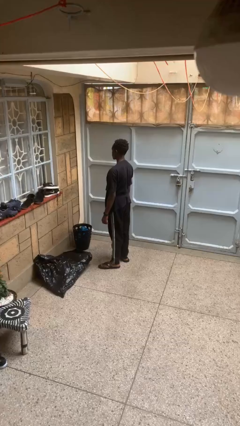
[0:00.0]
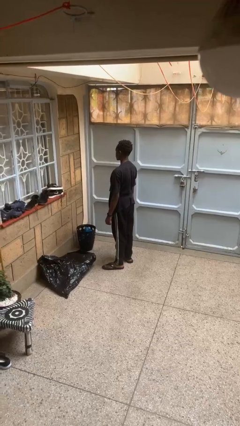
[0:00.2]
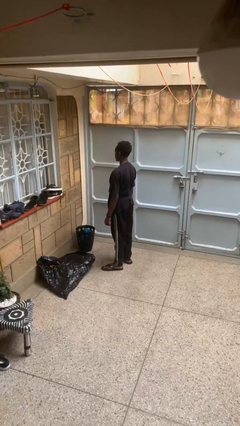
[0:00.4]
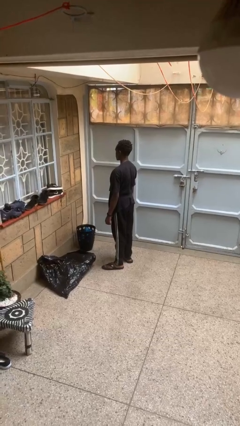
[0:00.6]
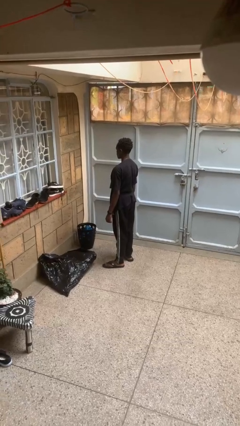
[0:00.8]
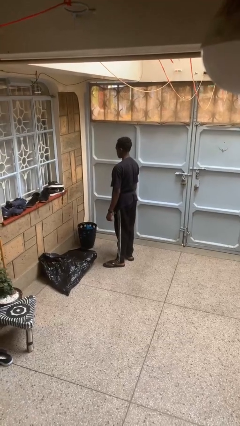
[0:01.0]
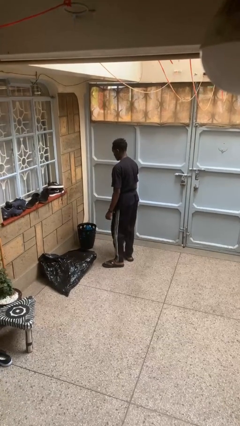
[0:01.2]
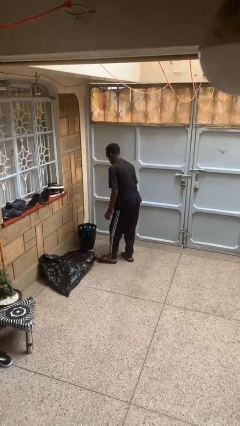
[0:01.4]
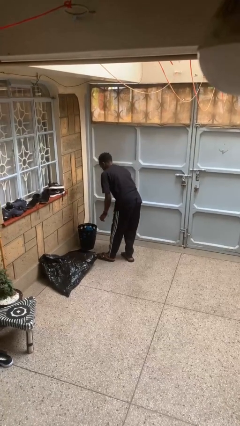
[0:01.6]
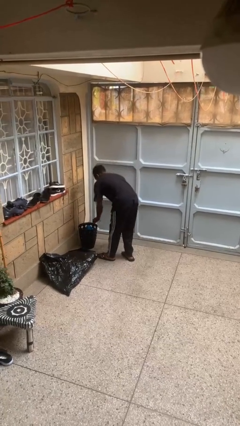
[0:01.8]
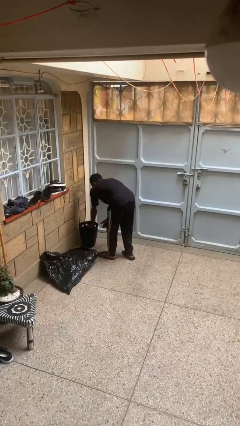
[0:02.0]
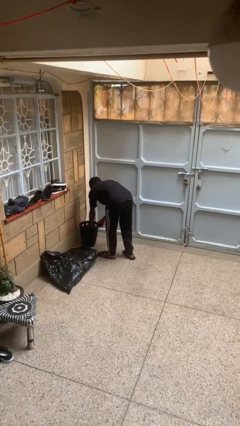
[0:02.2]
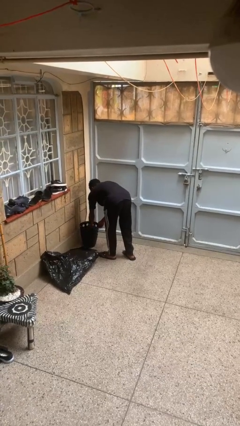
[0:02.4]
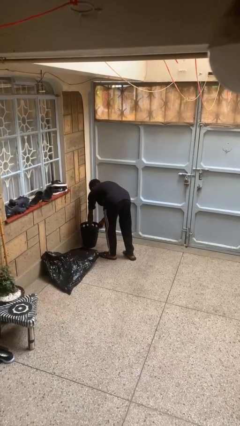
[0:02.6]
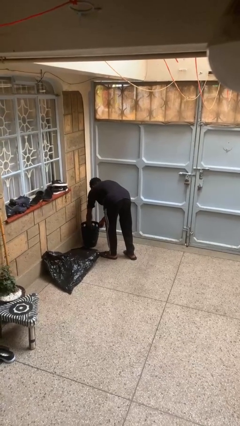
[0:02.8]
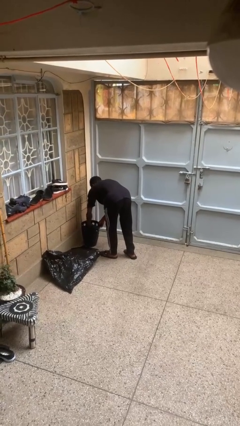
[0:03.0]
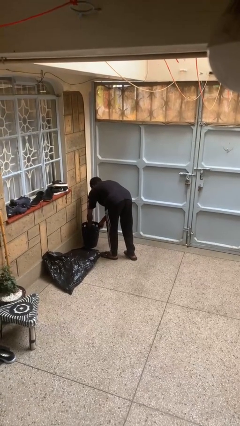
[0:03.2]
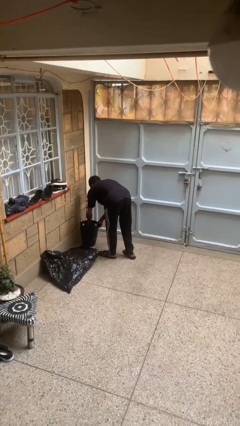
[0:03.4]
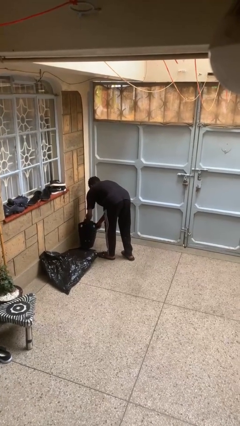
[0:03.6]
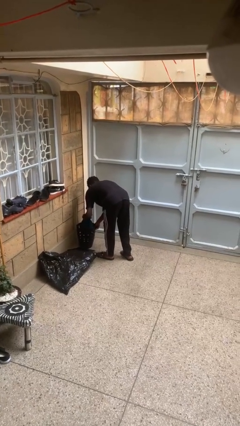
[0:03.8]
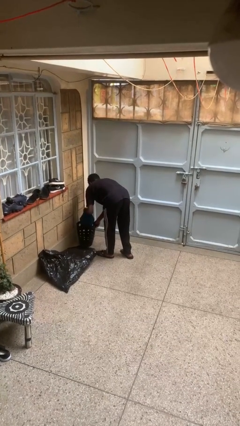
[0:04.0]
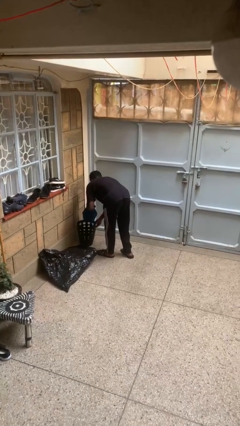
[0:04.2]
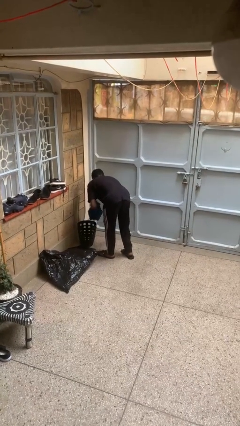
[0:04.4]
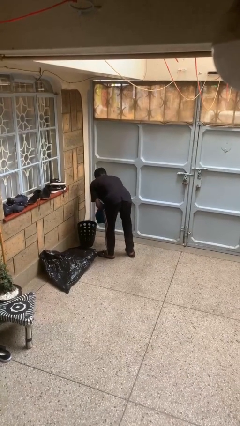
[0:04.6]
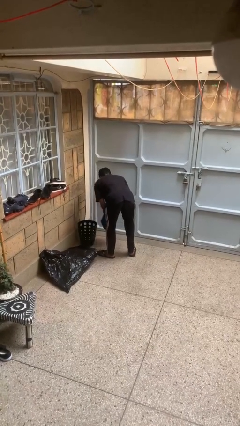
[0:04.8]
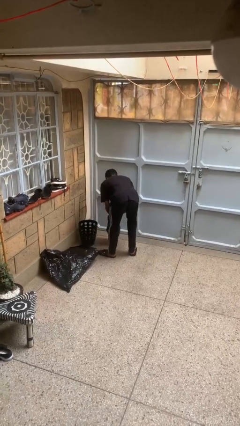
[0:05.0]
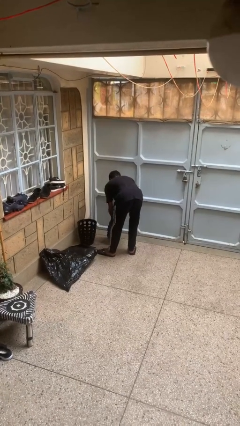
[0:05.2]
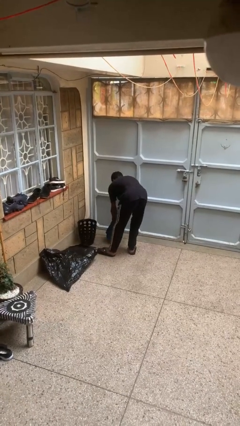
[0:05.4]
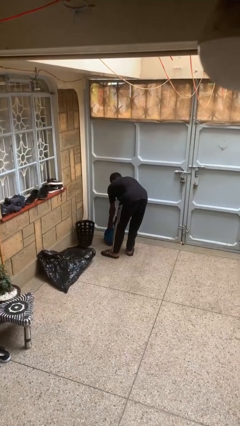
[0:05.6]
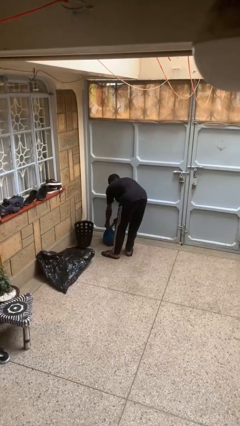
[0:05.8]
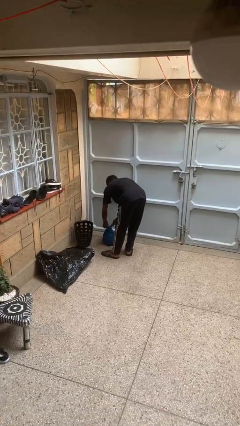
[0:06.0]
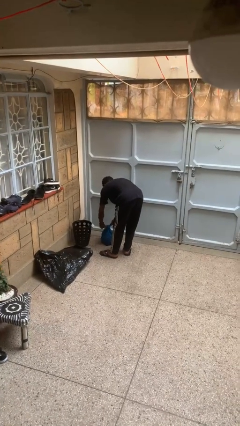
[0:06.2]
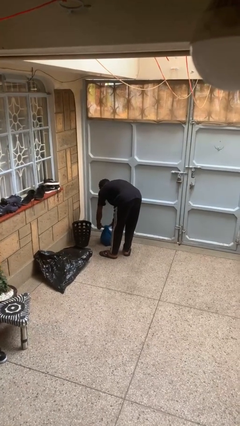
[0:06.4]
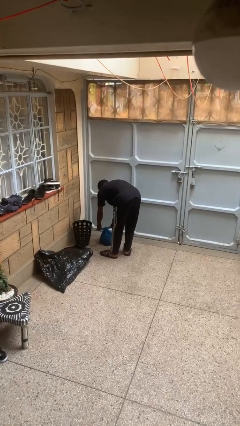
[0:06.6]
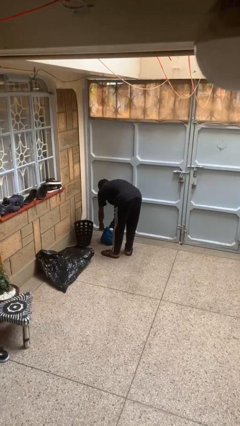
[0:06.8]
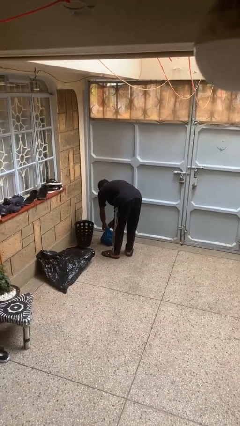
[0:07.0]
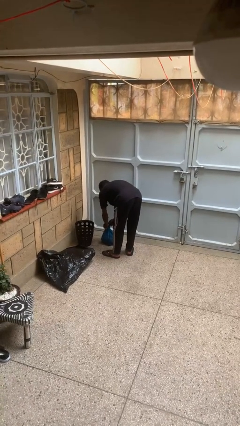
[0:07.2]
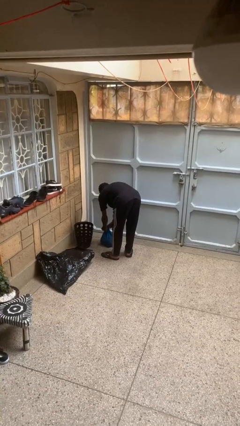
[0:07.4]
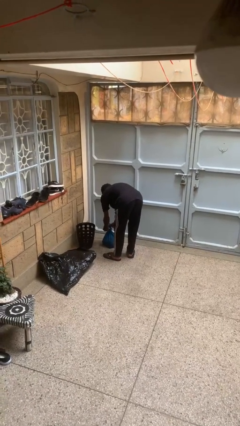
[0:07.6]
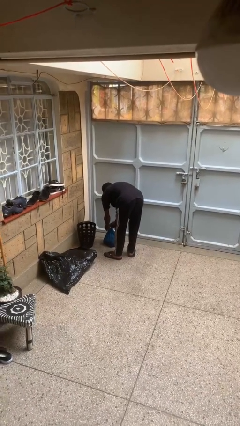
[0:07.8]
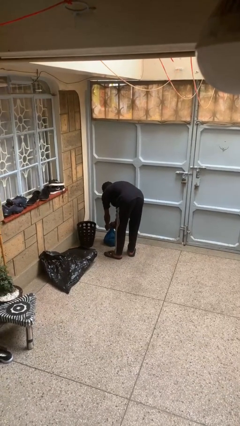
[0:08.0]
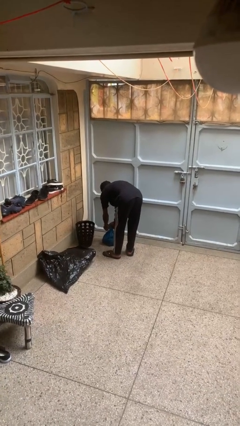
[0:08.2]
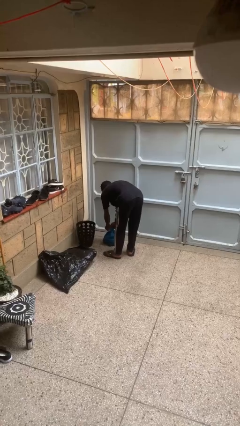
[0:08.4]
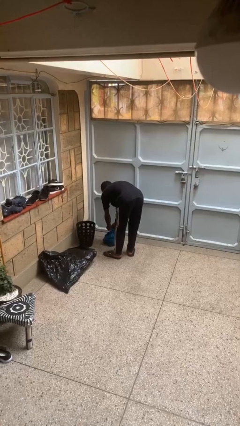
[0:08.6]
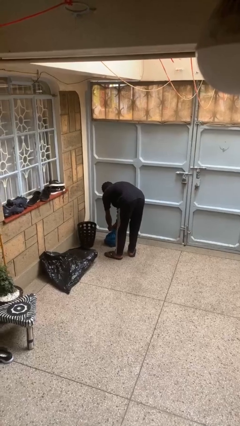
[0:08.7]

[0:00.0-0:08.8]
person removes trashbag from trashcan

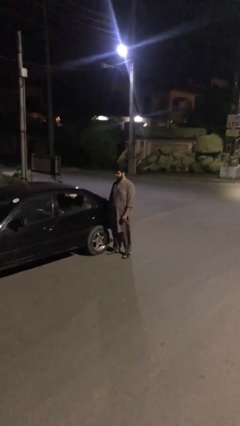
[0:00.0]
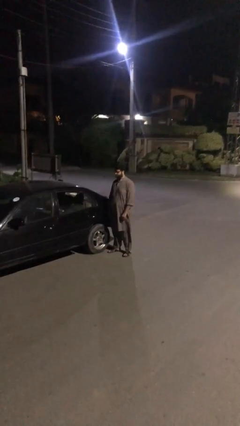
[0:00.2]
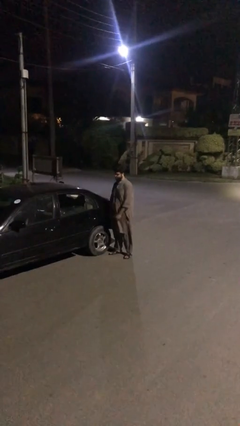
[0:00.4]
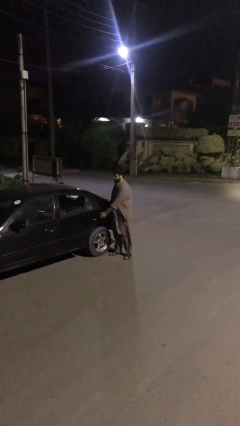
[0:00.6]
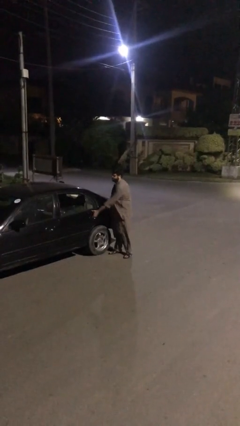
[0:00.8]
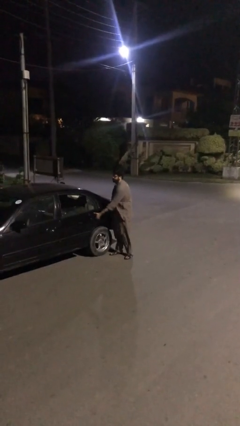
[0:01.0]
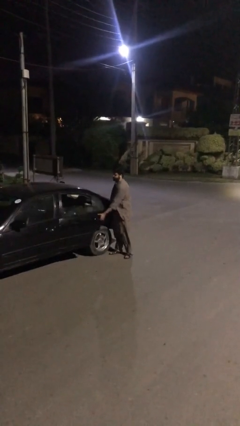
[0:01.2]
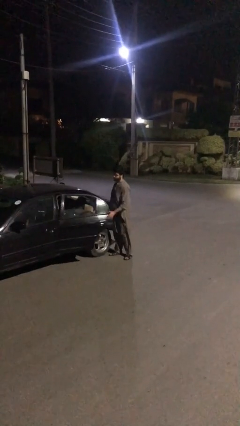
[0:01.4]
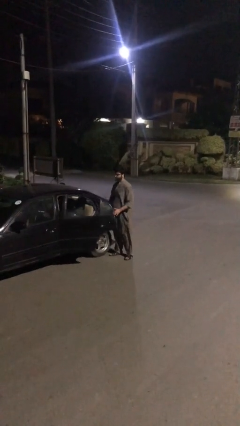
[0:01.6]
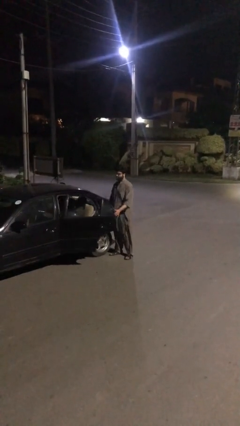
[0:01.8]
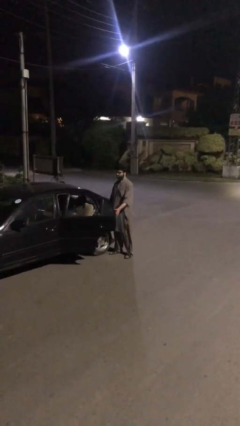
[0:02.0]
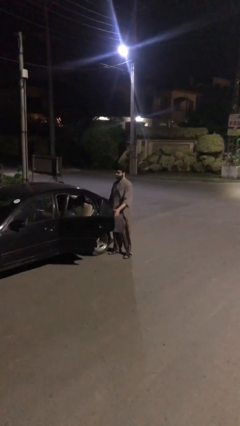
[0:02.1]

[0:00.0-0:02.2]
person opens car door

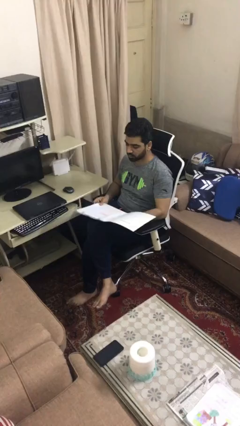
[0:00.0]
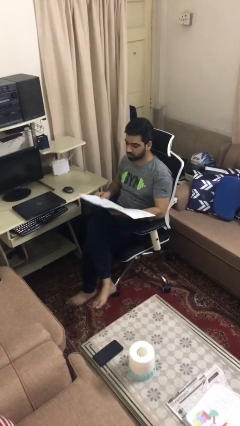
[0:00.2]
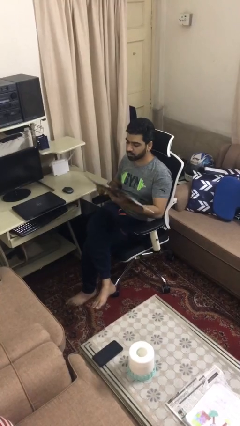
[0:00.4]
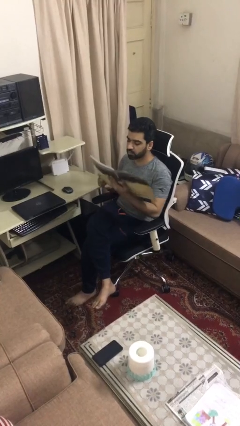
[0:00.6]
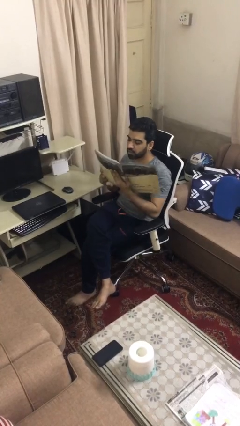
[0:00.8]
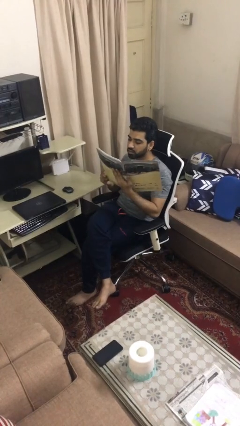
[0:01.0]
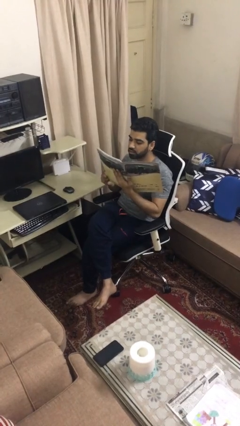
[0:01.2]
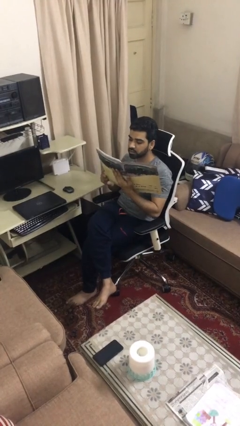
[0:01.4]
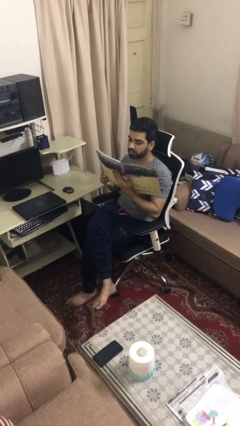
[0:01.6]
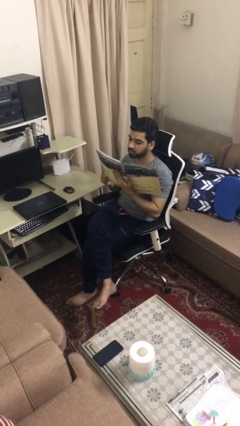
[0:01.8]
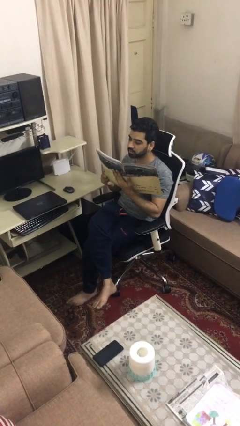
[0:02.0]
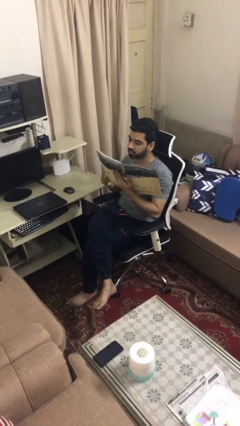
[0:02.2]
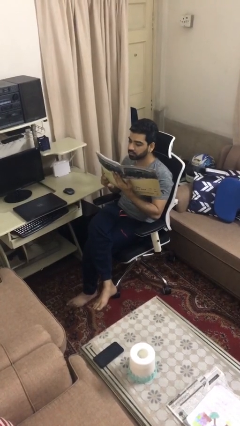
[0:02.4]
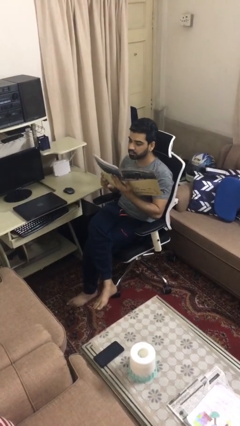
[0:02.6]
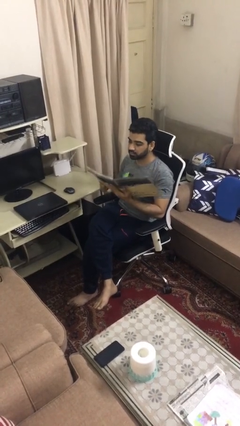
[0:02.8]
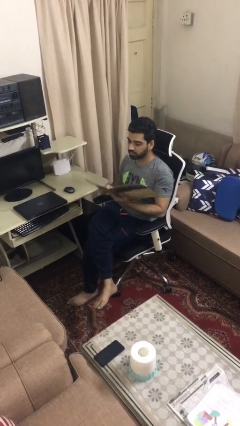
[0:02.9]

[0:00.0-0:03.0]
person reads document

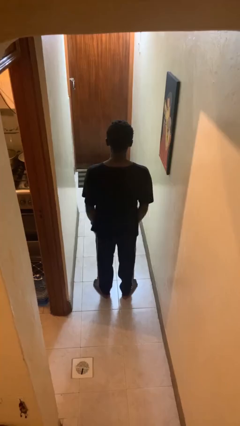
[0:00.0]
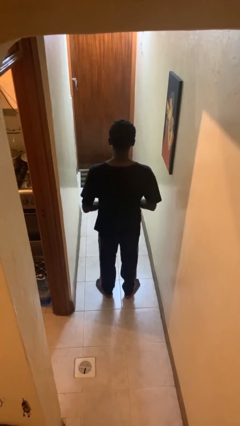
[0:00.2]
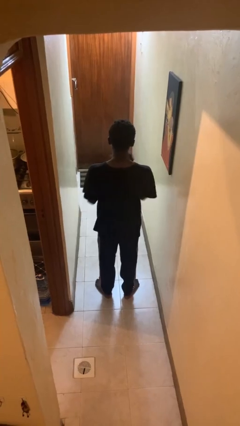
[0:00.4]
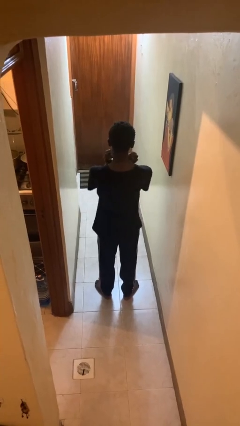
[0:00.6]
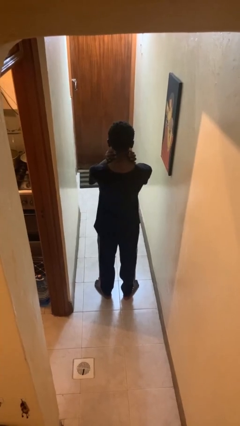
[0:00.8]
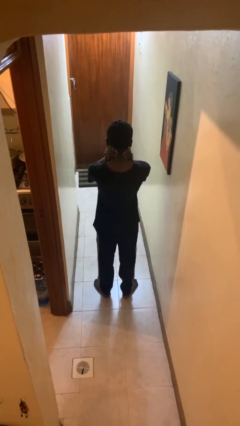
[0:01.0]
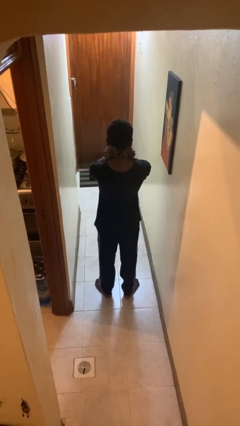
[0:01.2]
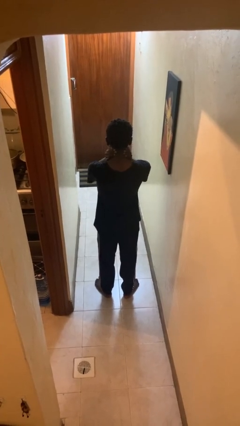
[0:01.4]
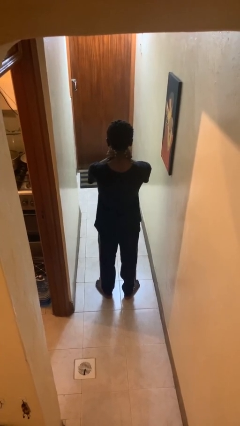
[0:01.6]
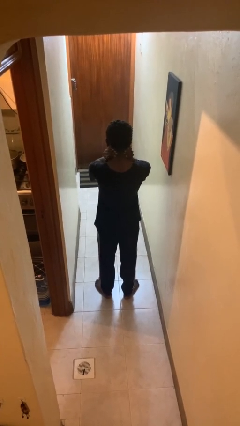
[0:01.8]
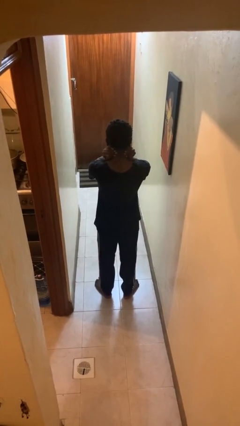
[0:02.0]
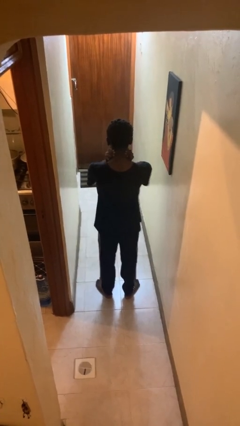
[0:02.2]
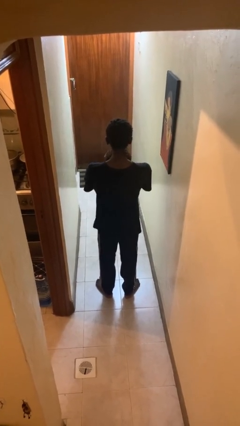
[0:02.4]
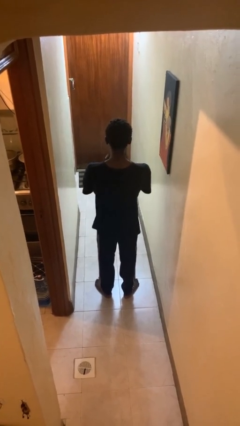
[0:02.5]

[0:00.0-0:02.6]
person rubs neck

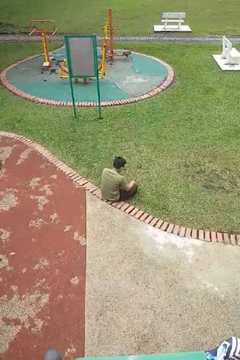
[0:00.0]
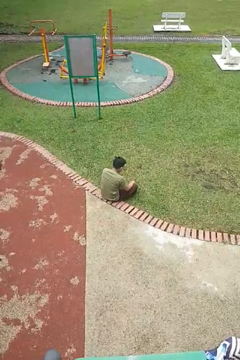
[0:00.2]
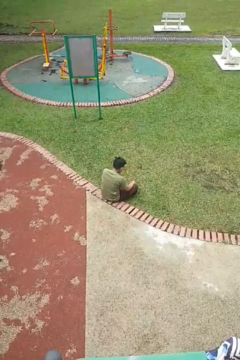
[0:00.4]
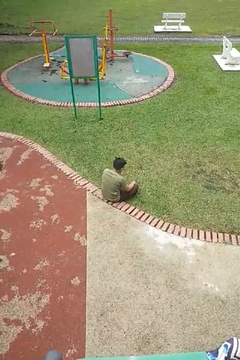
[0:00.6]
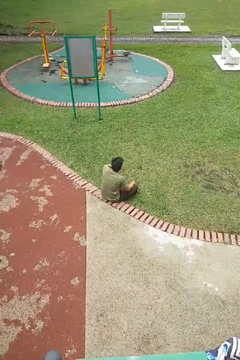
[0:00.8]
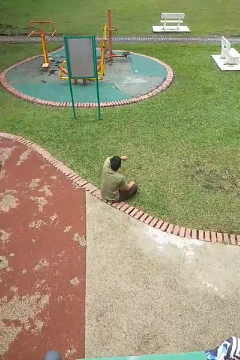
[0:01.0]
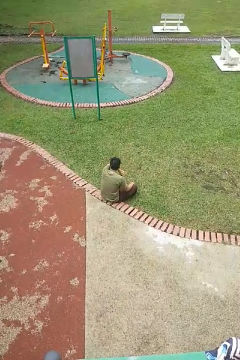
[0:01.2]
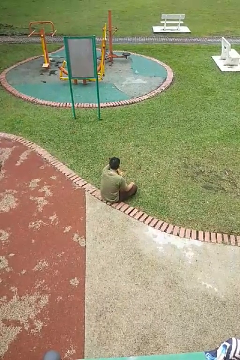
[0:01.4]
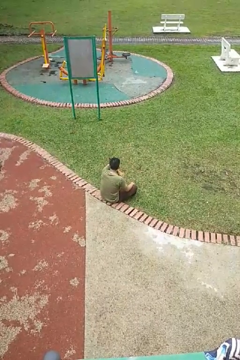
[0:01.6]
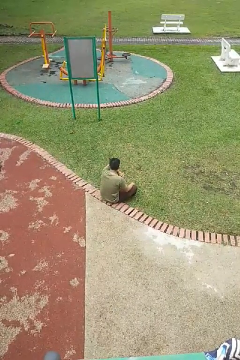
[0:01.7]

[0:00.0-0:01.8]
person sneezes into arm
